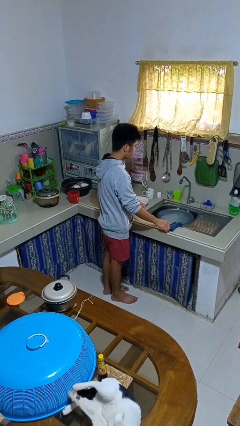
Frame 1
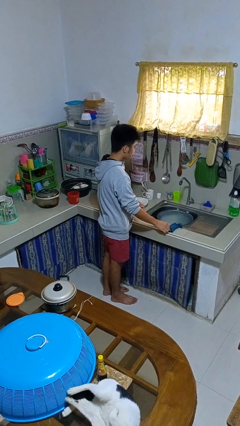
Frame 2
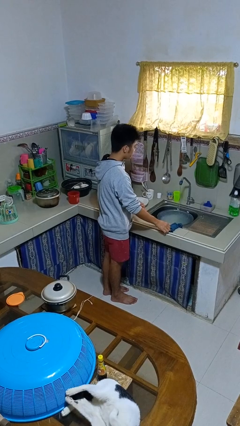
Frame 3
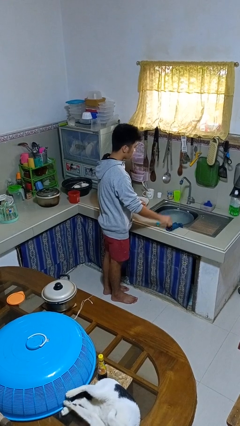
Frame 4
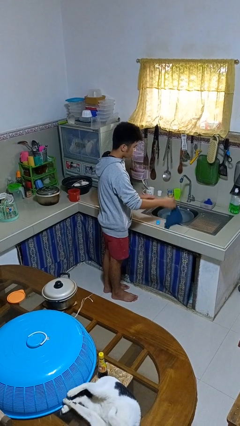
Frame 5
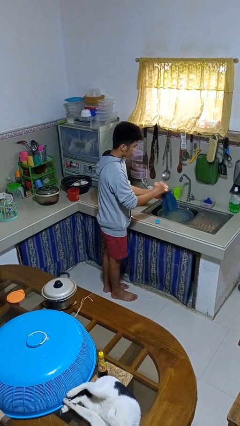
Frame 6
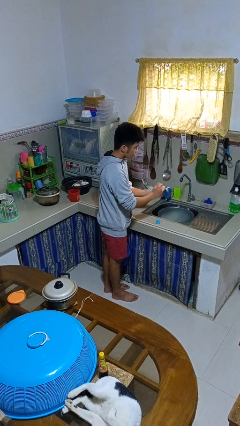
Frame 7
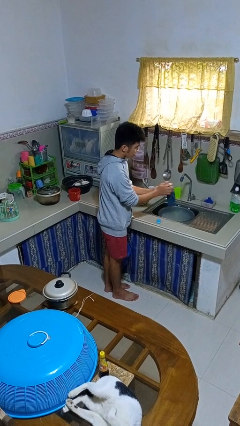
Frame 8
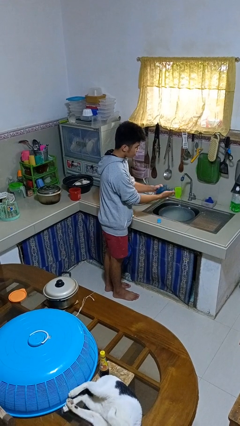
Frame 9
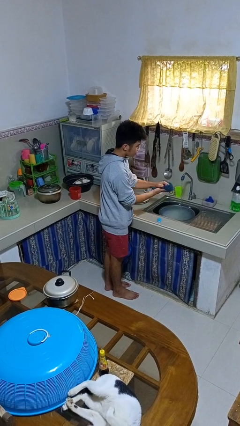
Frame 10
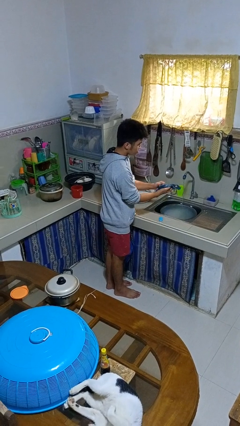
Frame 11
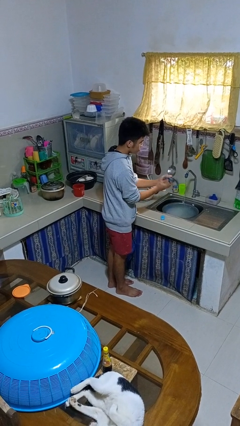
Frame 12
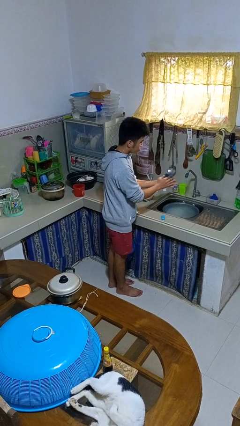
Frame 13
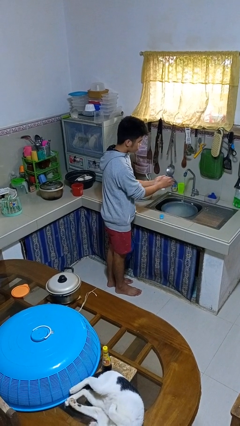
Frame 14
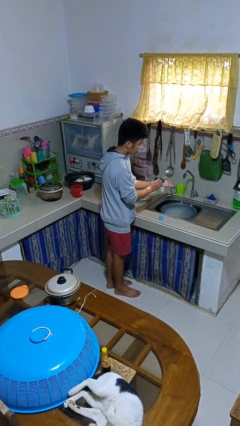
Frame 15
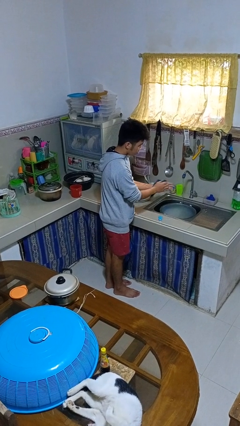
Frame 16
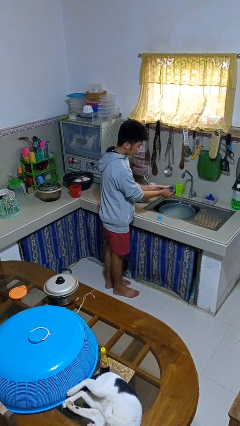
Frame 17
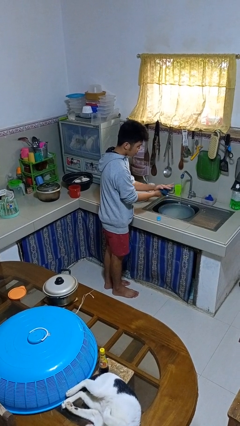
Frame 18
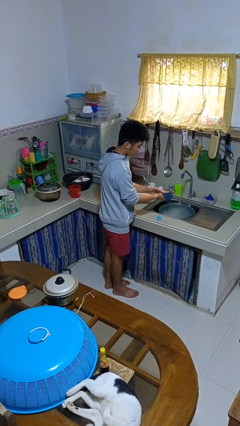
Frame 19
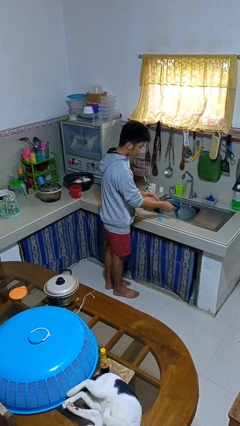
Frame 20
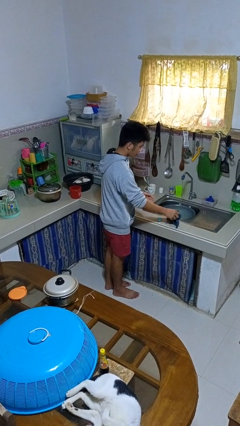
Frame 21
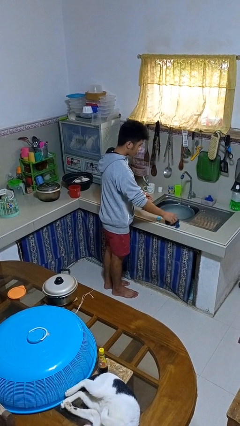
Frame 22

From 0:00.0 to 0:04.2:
person dries hands with towel

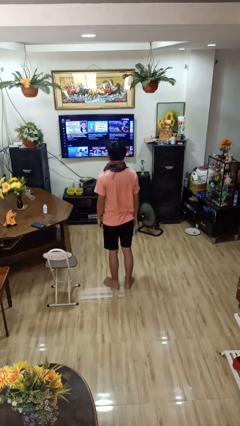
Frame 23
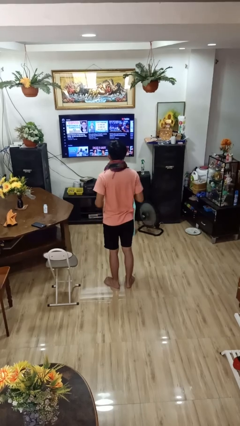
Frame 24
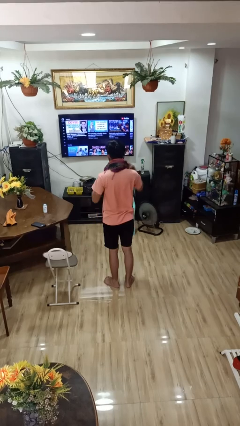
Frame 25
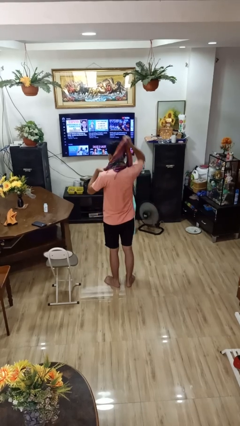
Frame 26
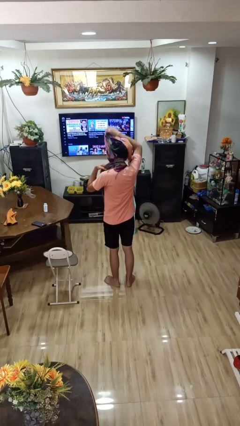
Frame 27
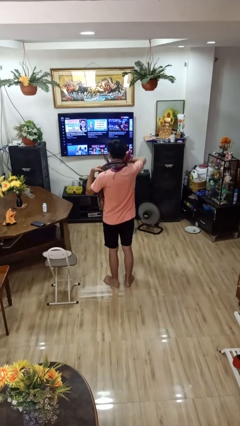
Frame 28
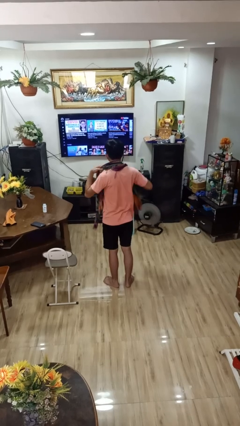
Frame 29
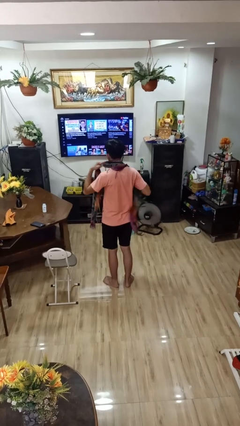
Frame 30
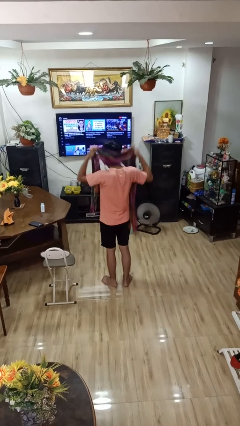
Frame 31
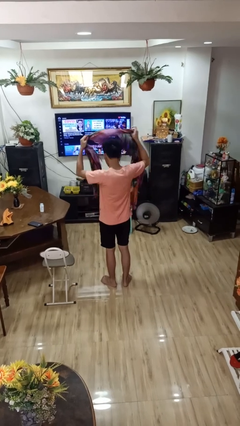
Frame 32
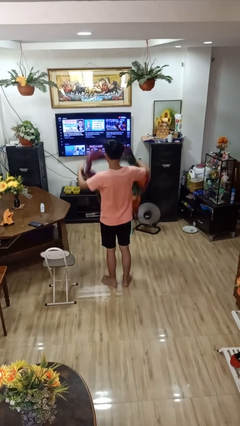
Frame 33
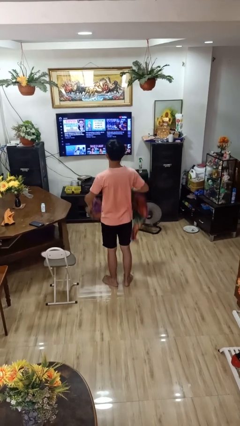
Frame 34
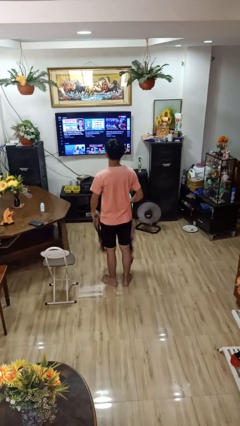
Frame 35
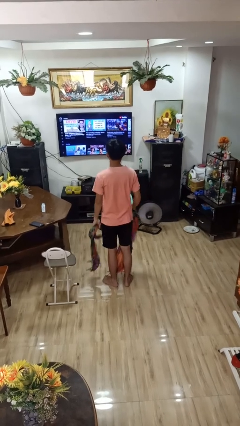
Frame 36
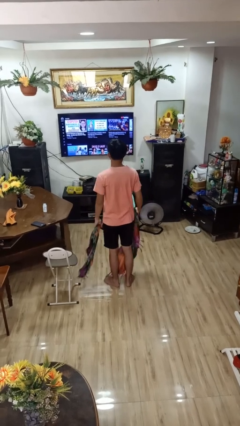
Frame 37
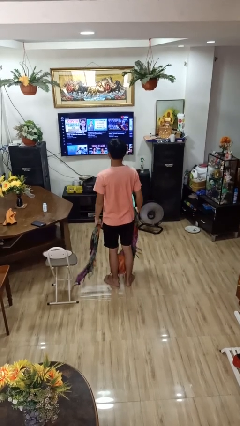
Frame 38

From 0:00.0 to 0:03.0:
person takes off scarf

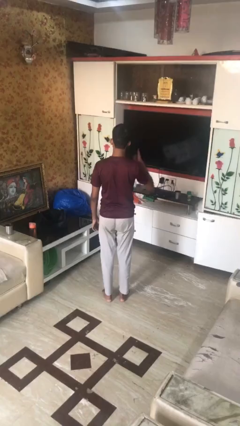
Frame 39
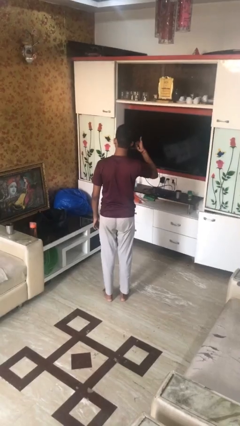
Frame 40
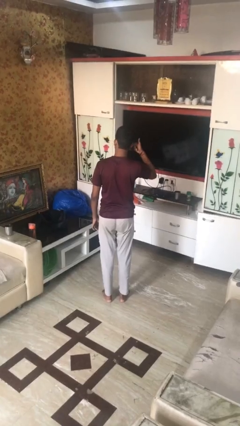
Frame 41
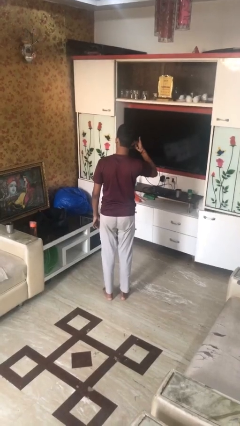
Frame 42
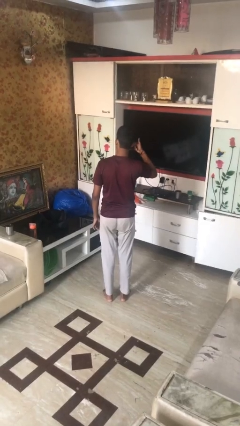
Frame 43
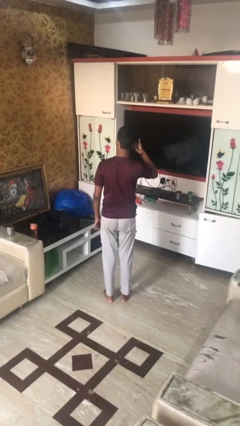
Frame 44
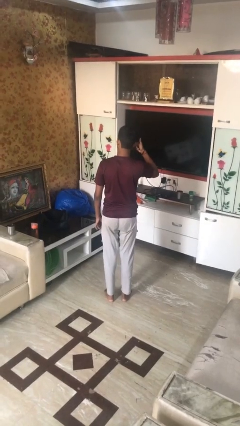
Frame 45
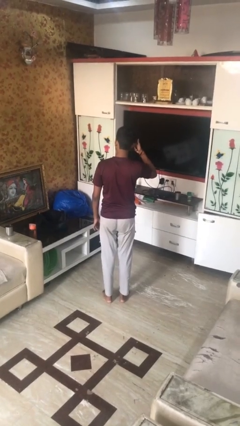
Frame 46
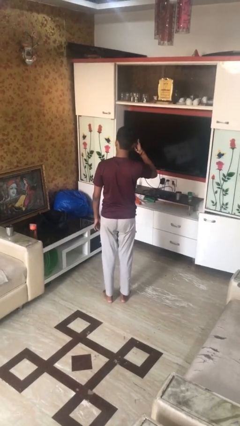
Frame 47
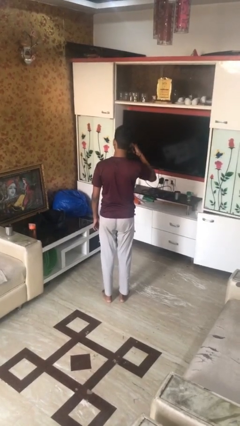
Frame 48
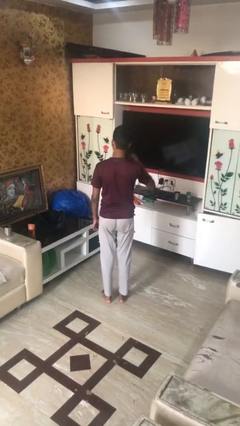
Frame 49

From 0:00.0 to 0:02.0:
person gestures call me

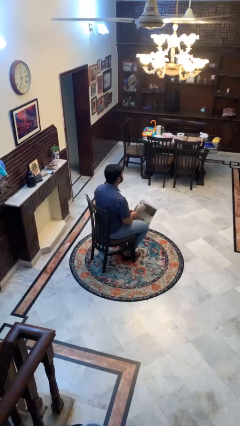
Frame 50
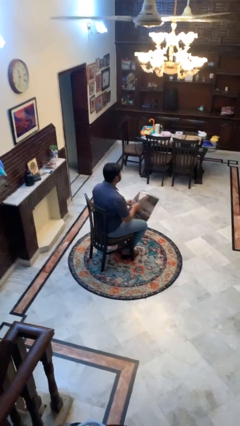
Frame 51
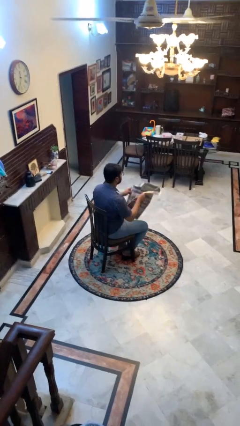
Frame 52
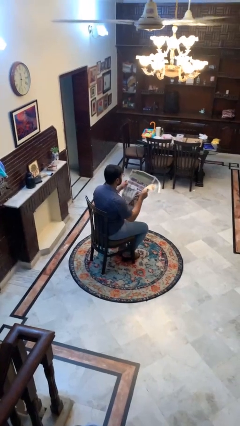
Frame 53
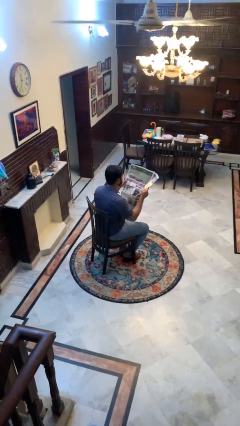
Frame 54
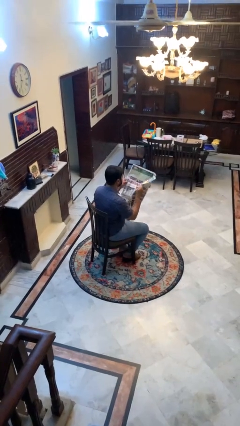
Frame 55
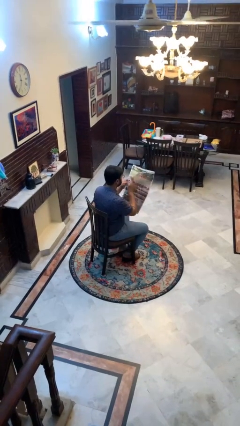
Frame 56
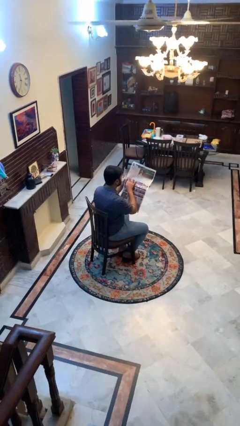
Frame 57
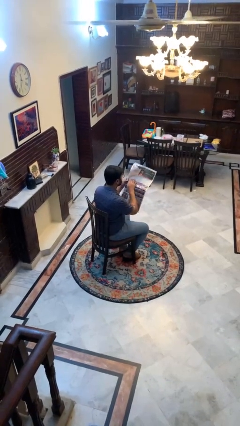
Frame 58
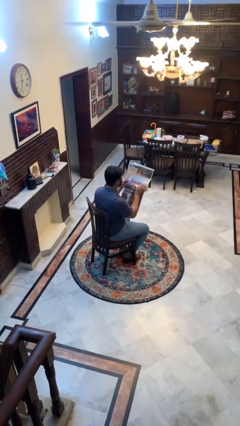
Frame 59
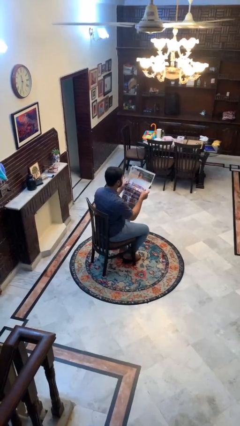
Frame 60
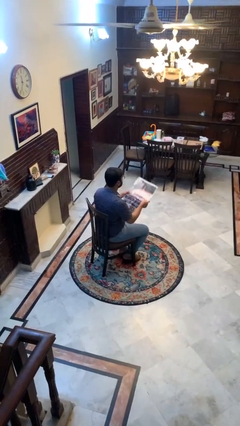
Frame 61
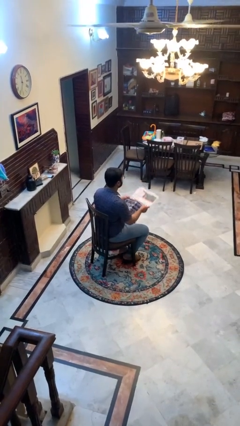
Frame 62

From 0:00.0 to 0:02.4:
person reads newspaper

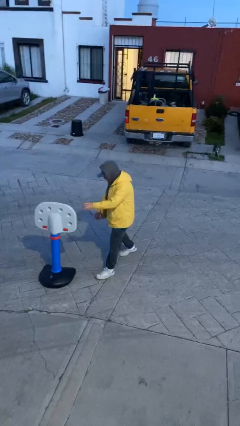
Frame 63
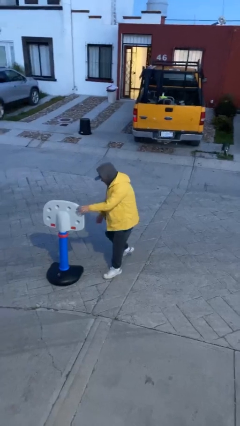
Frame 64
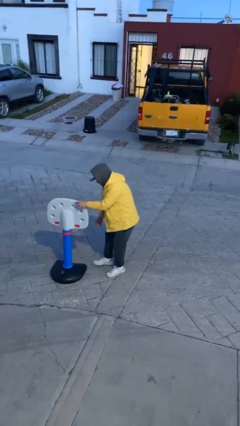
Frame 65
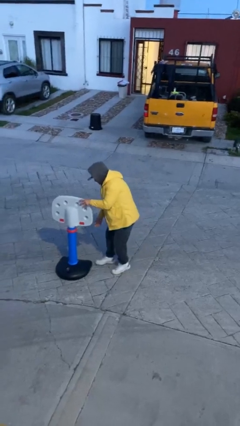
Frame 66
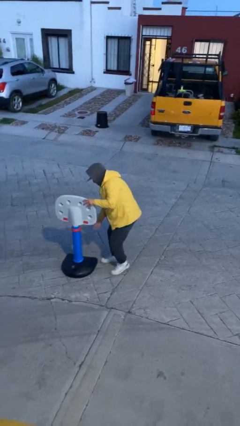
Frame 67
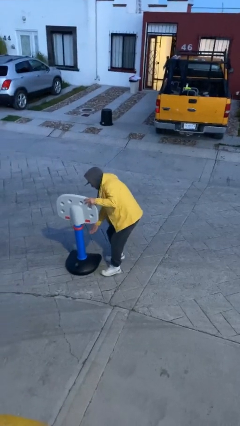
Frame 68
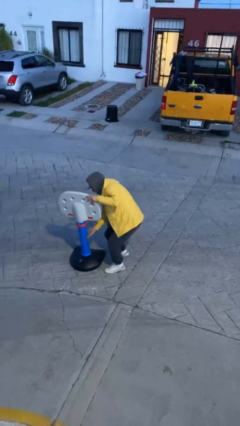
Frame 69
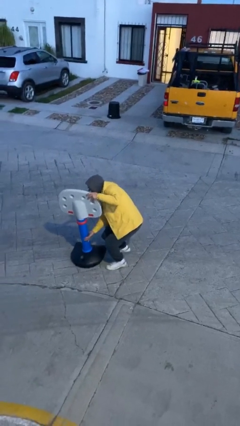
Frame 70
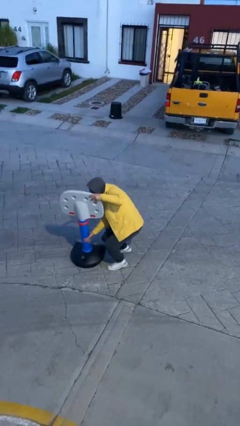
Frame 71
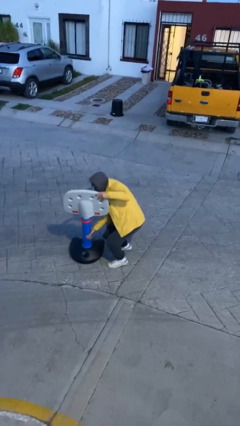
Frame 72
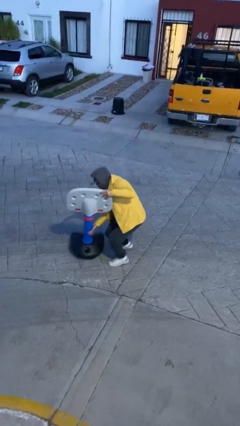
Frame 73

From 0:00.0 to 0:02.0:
person picks up object from floor

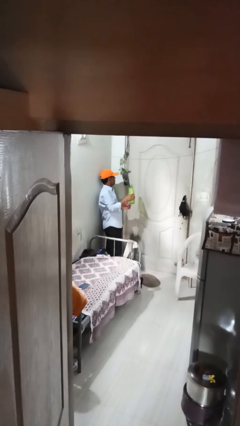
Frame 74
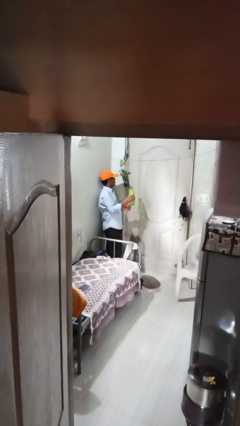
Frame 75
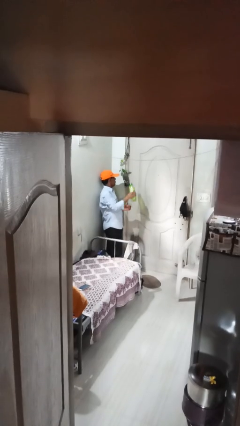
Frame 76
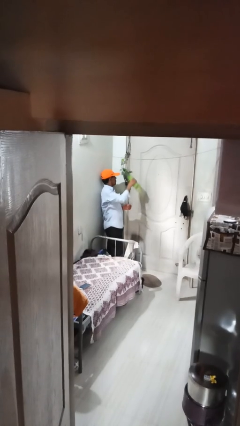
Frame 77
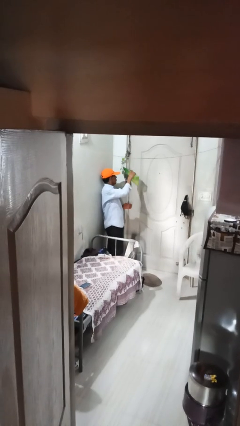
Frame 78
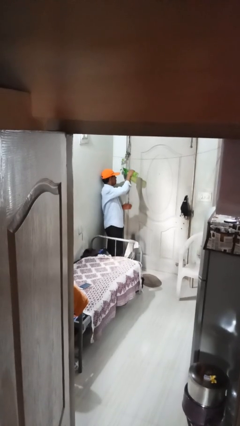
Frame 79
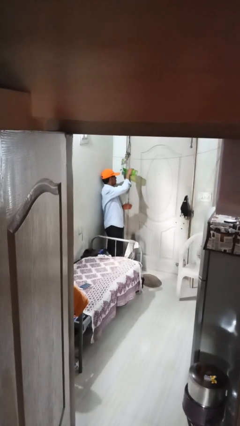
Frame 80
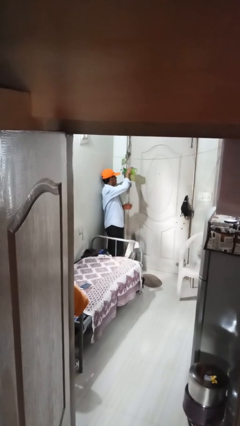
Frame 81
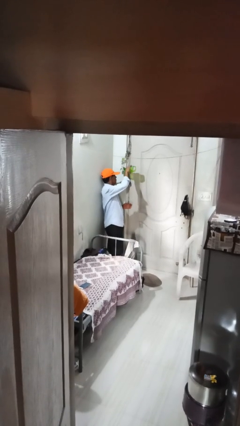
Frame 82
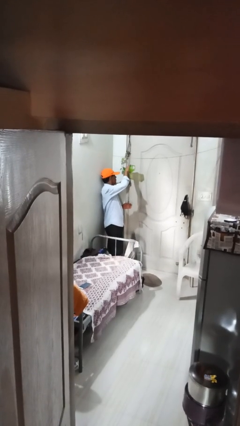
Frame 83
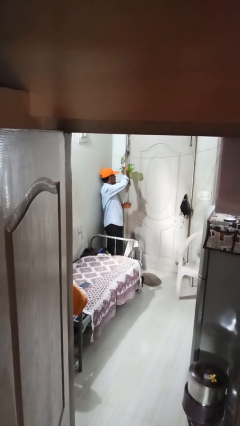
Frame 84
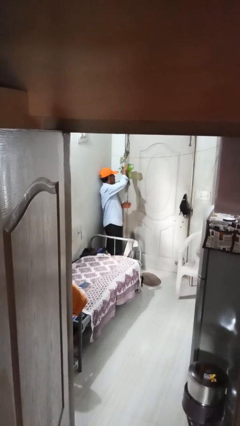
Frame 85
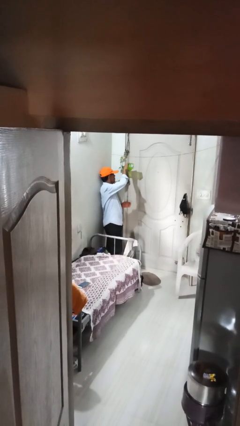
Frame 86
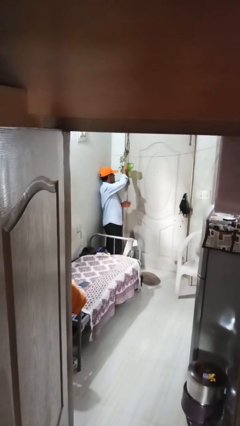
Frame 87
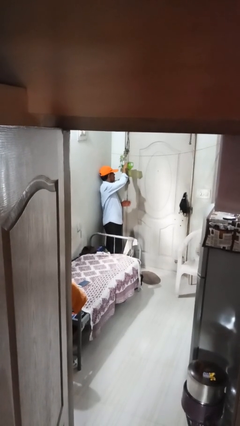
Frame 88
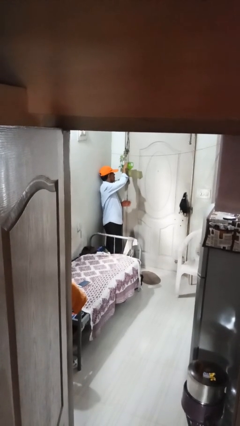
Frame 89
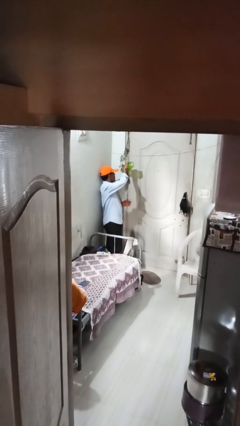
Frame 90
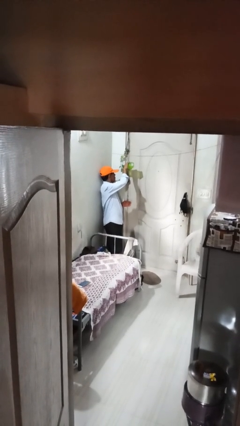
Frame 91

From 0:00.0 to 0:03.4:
person waters houseplant

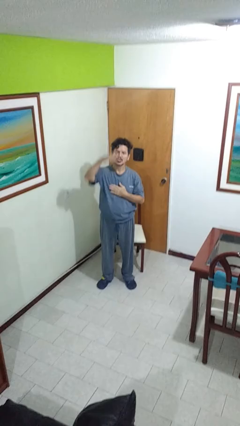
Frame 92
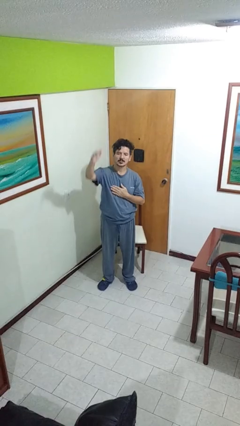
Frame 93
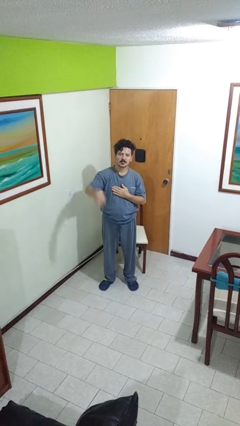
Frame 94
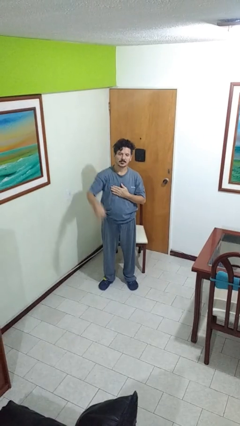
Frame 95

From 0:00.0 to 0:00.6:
person gestures blow kiss
